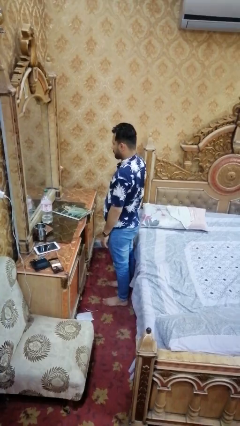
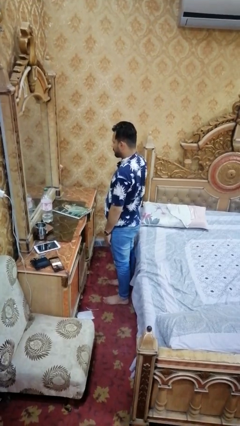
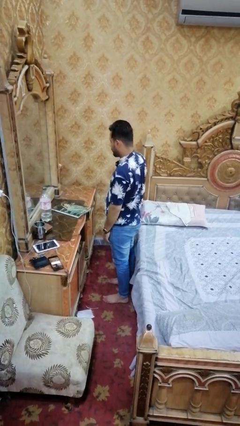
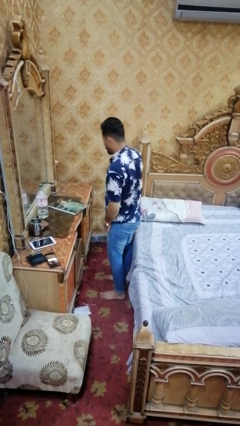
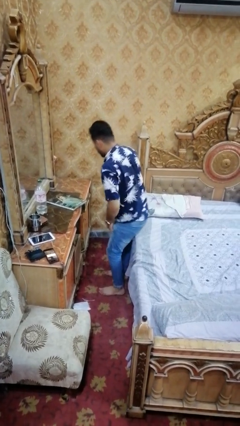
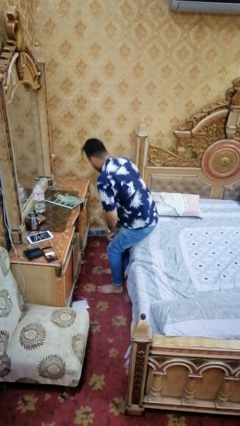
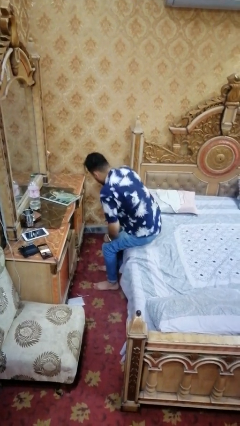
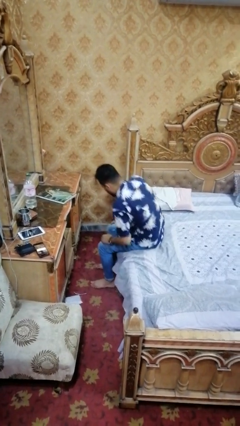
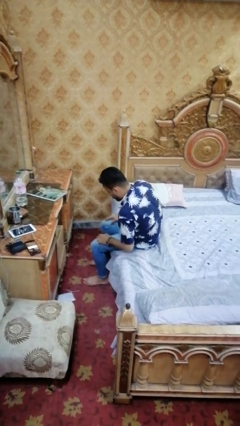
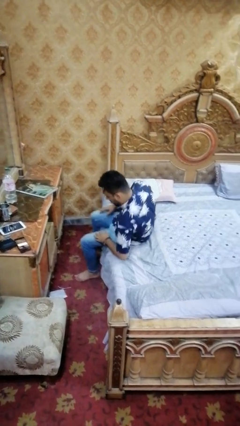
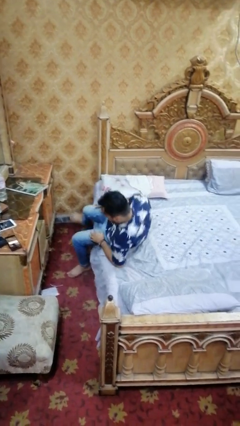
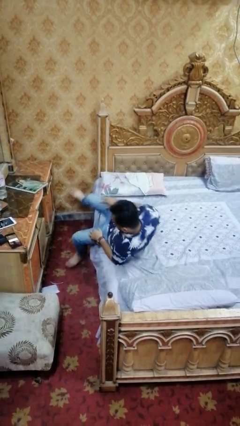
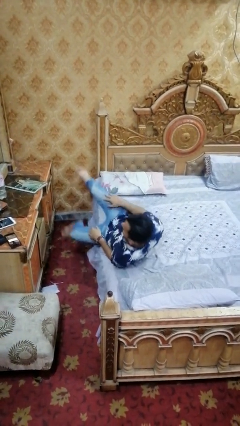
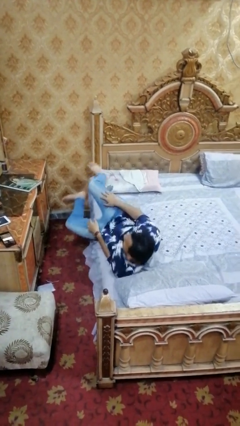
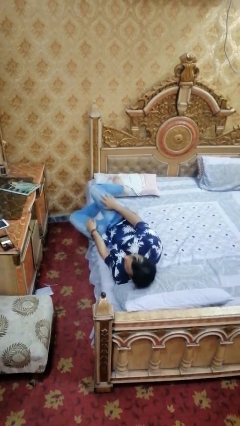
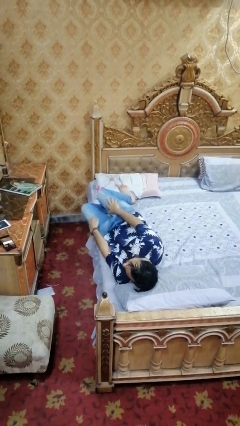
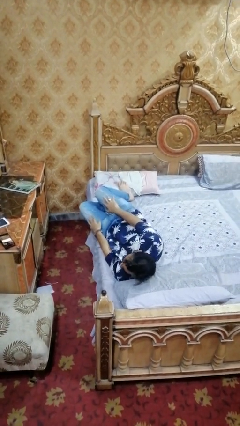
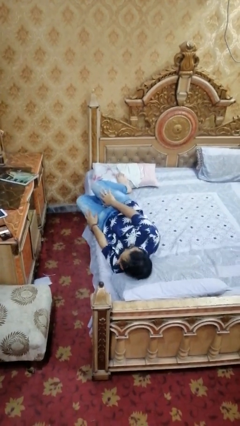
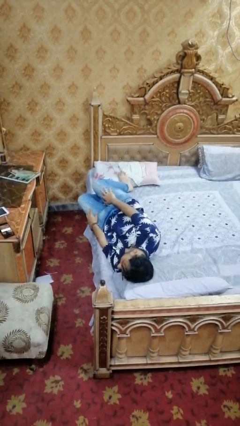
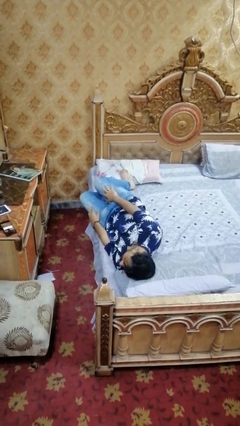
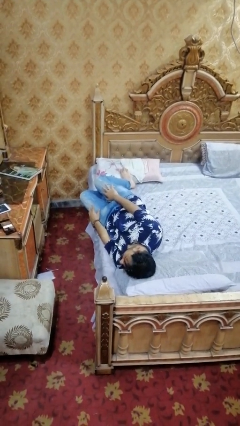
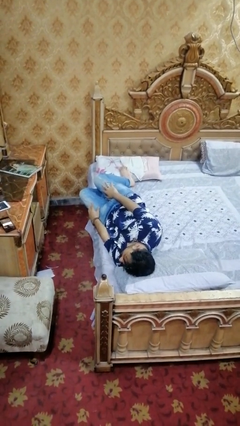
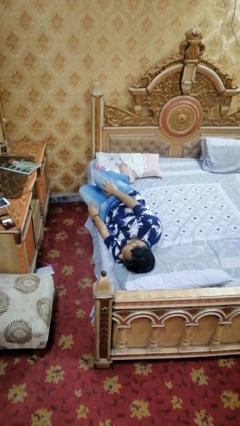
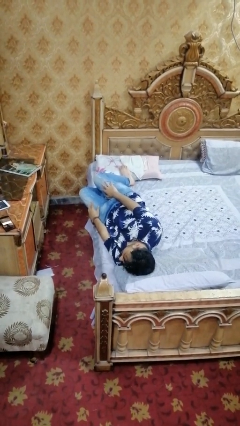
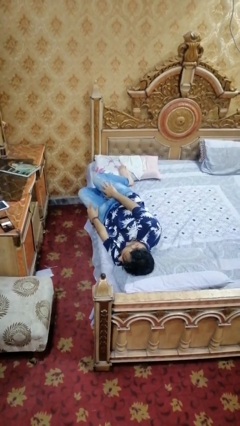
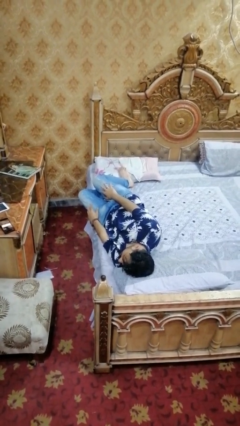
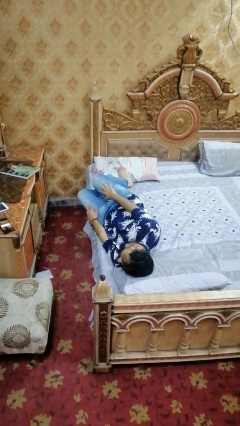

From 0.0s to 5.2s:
person lies down on bed

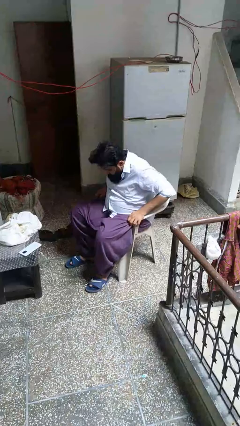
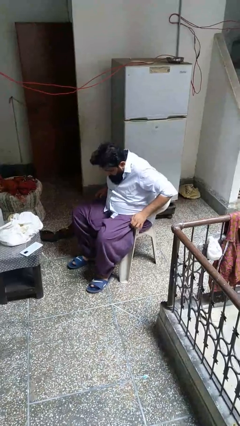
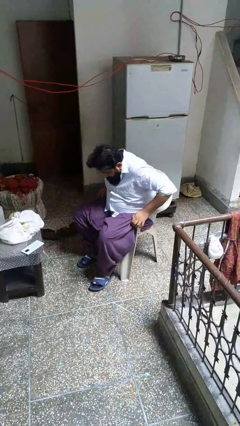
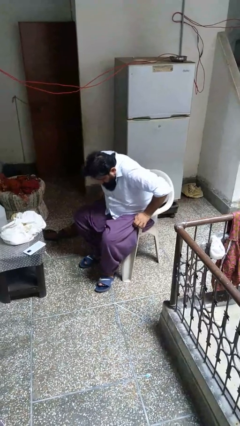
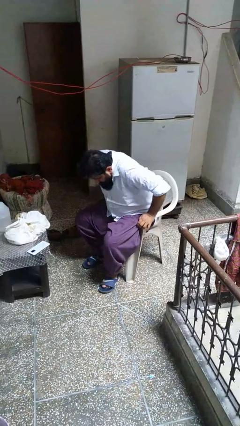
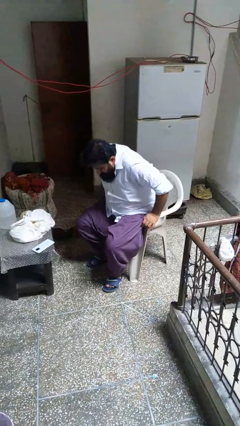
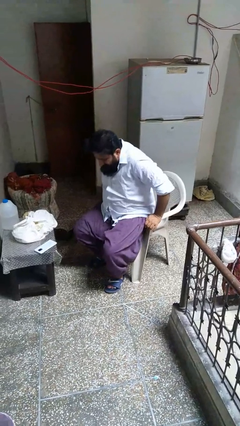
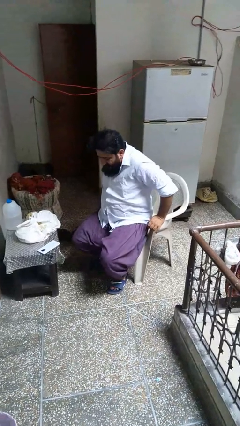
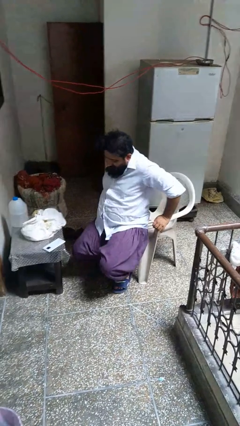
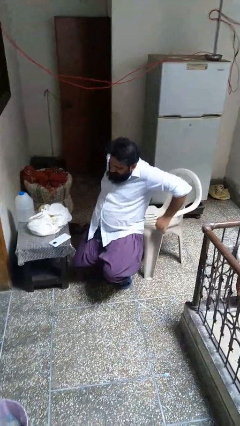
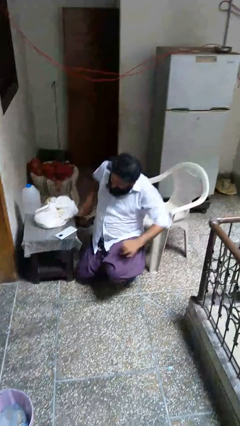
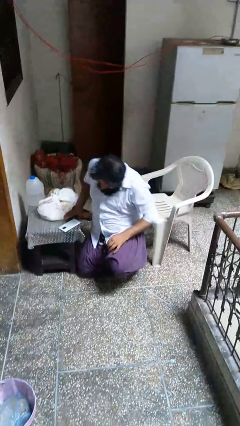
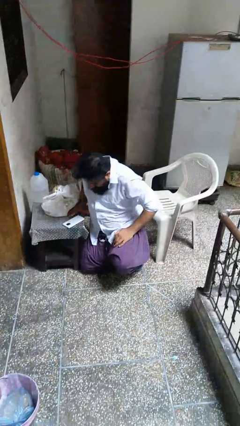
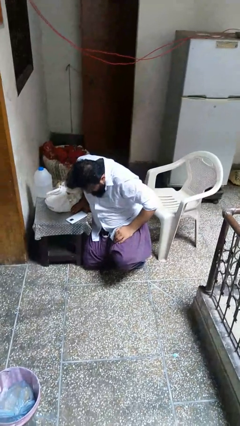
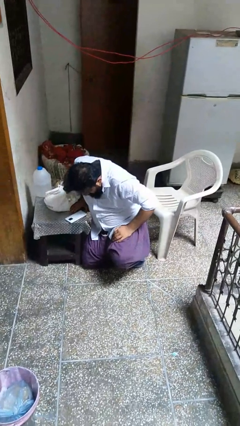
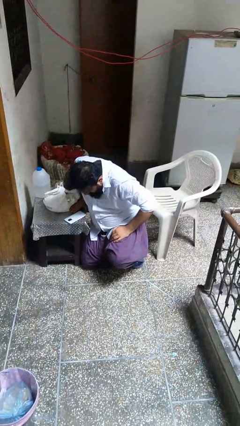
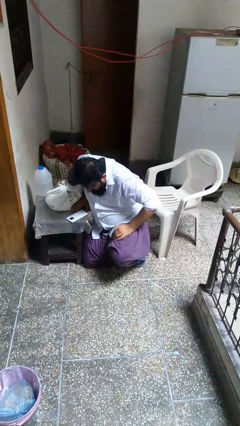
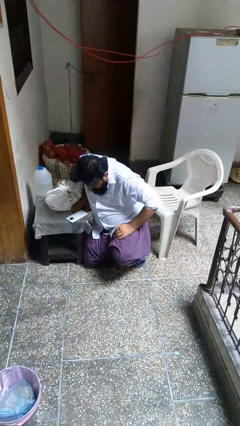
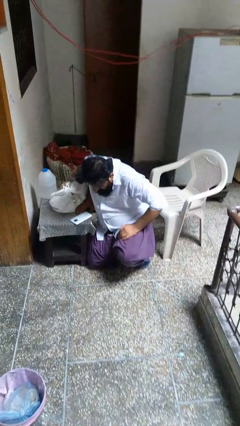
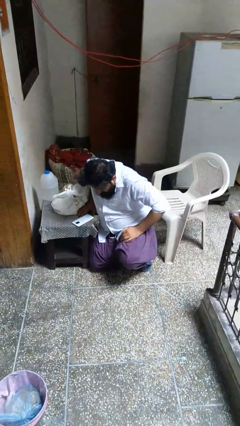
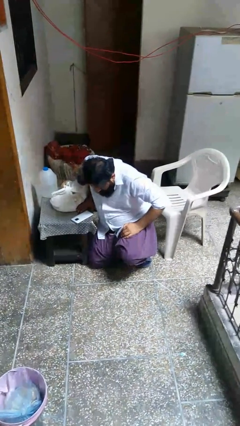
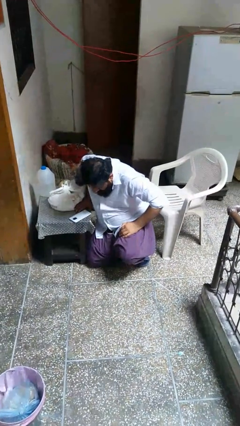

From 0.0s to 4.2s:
person falls from chair

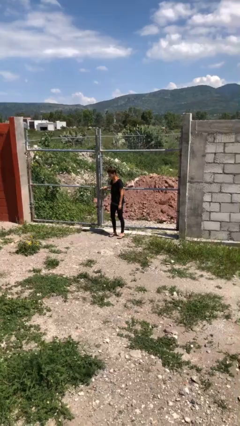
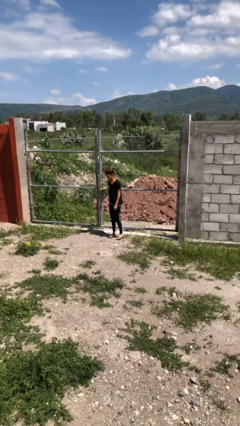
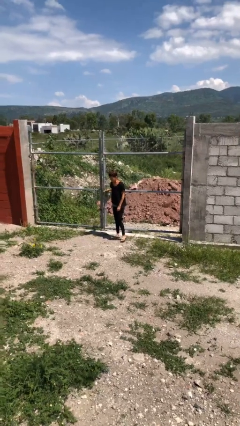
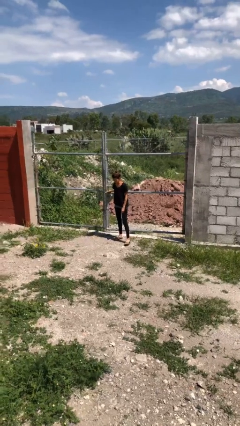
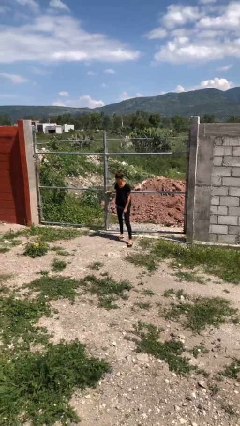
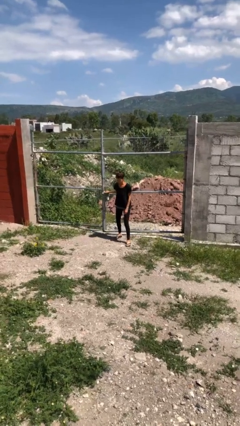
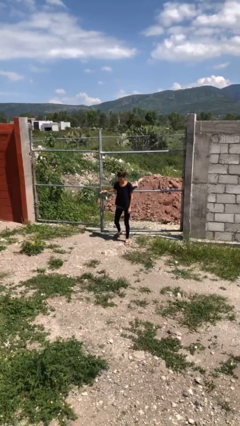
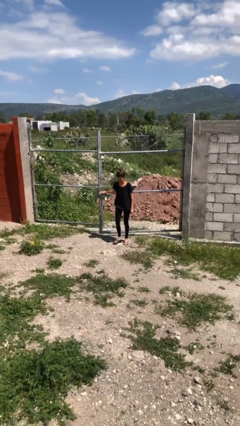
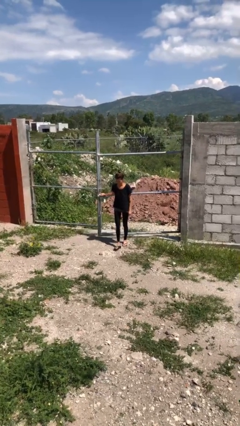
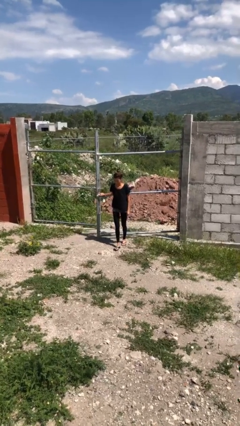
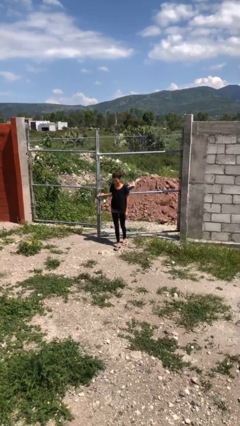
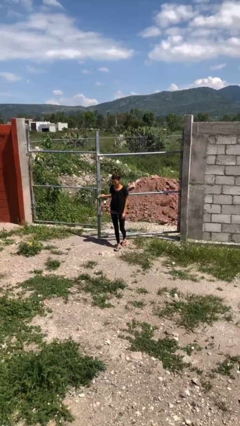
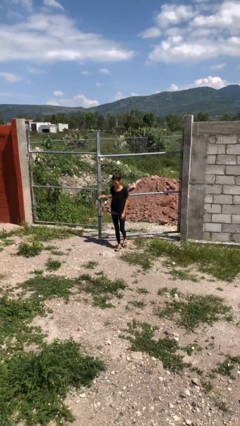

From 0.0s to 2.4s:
person opens gate

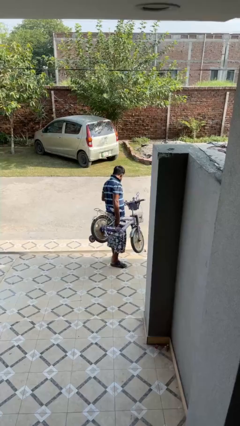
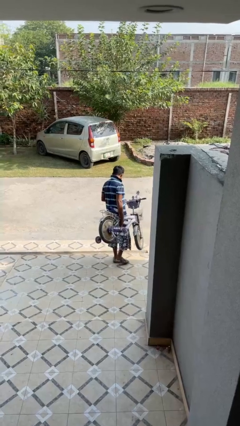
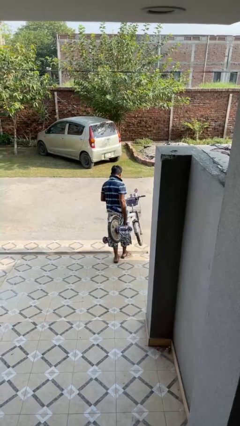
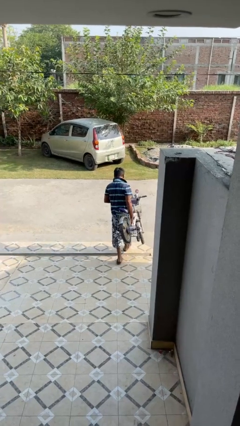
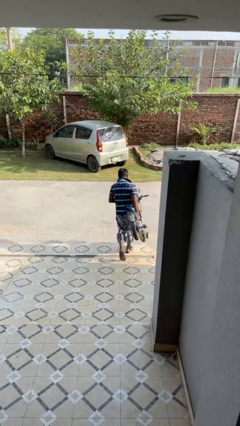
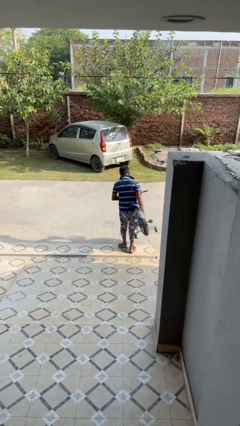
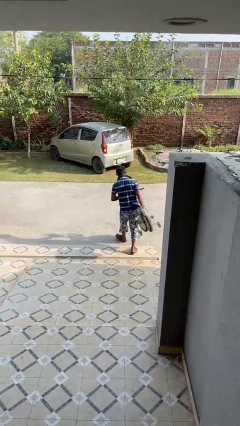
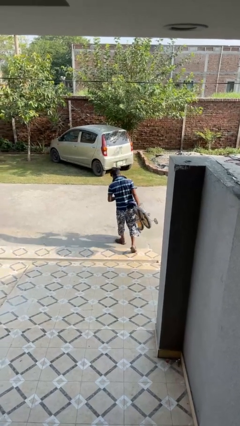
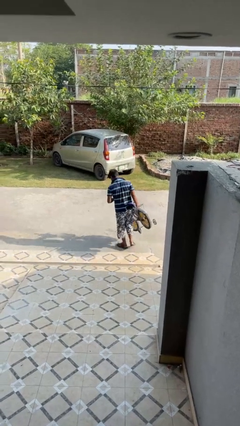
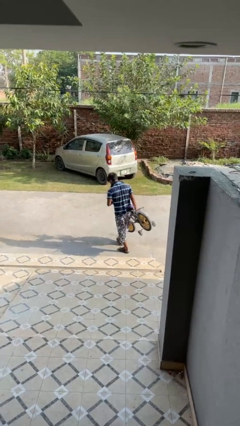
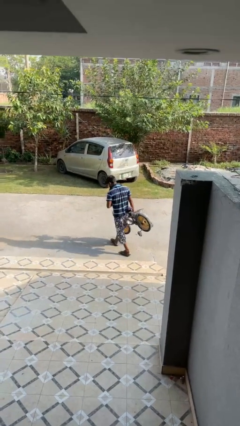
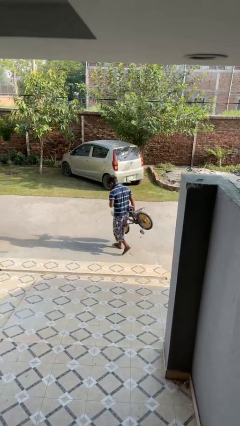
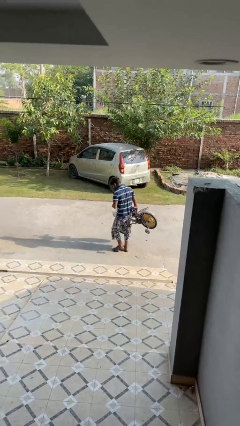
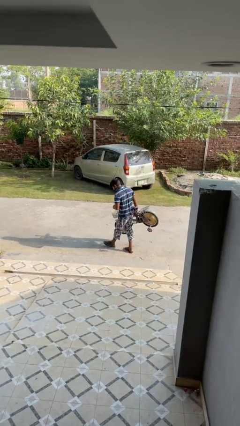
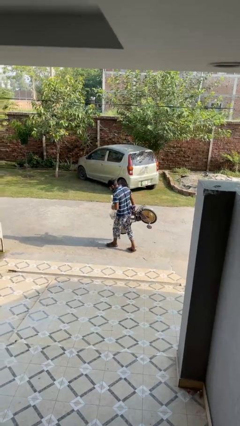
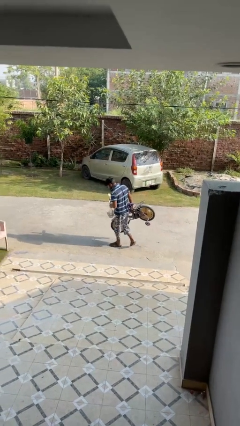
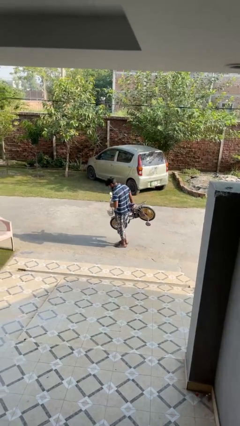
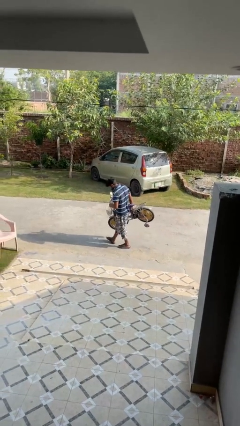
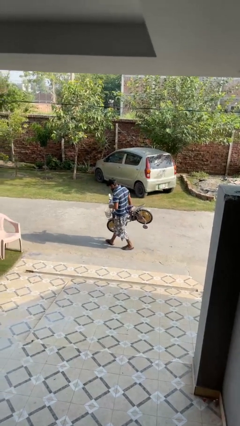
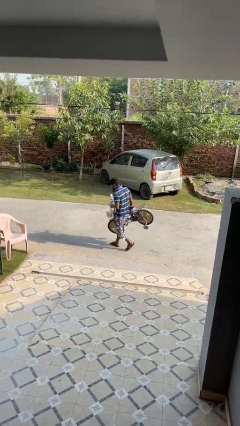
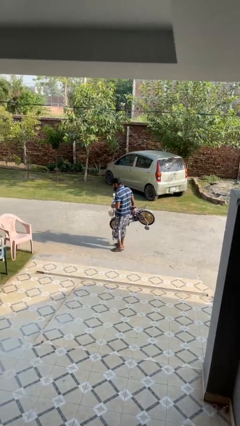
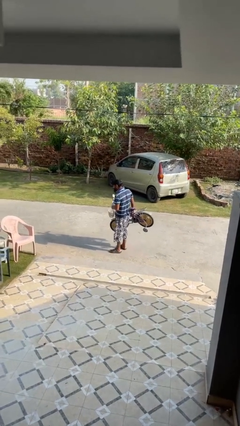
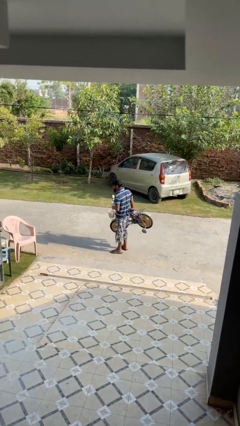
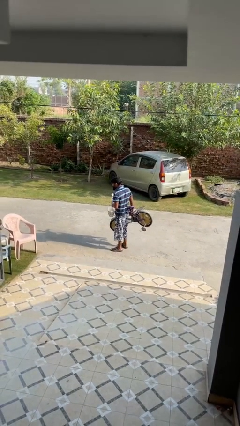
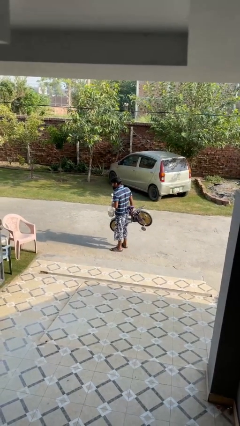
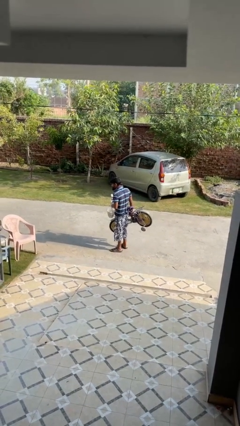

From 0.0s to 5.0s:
person carries bicycle

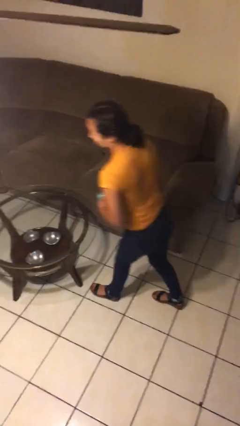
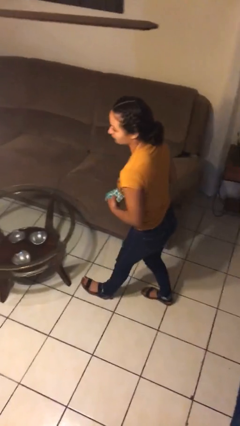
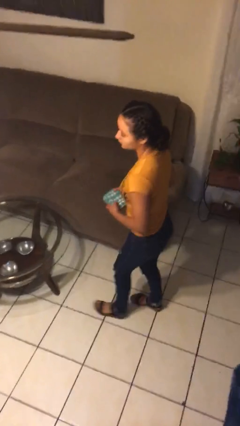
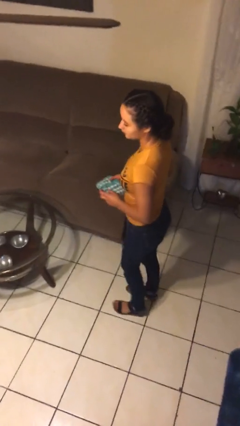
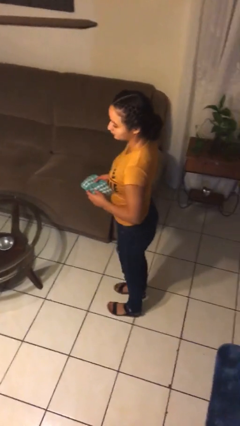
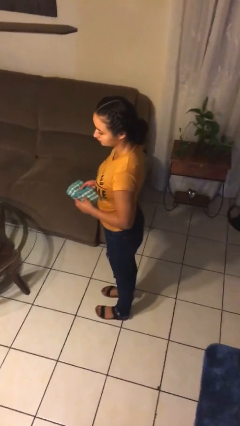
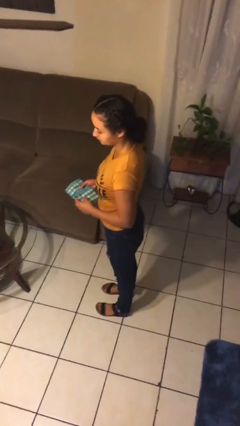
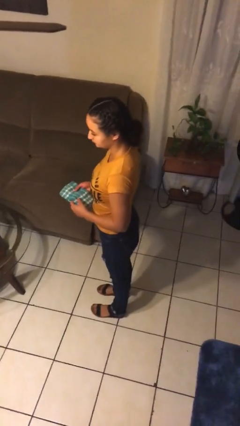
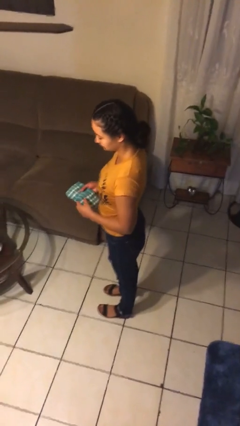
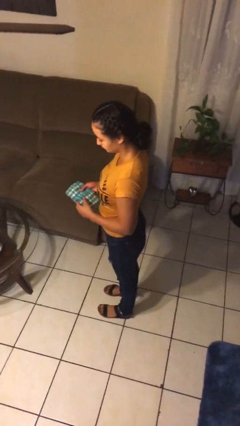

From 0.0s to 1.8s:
person picks up object from table
